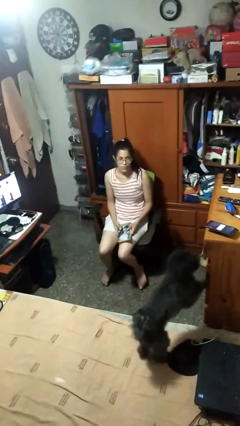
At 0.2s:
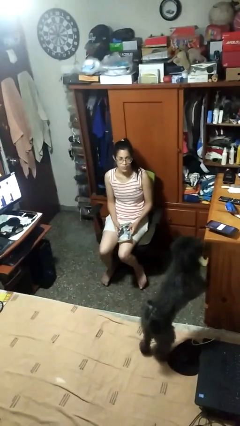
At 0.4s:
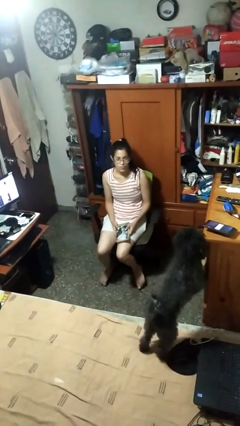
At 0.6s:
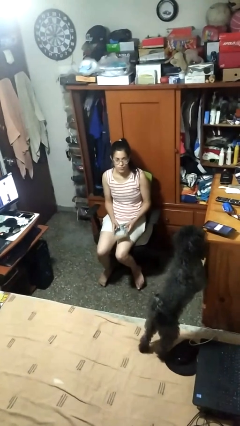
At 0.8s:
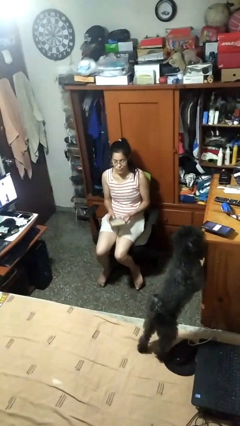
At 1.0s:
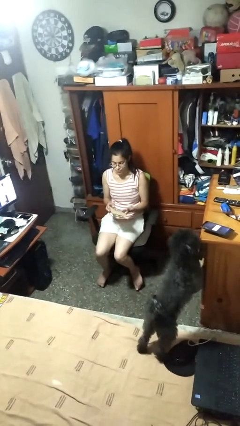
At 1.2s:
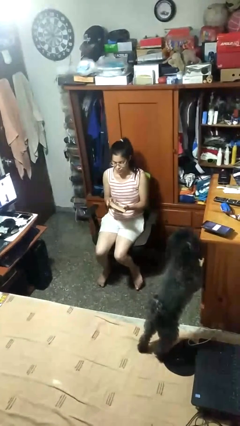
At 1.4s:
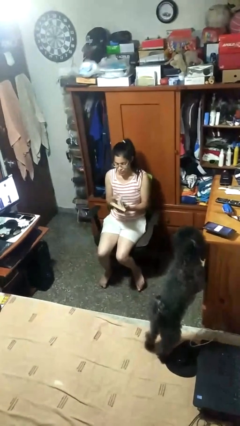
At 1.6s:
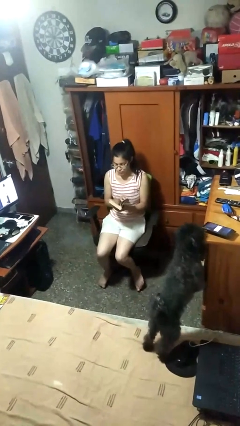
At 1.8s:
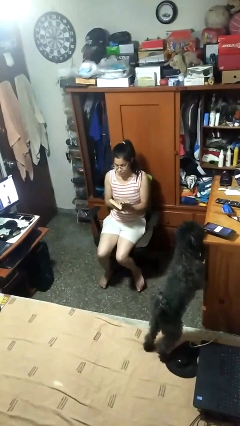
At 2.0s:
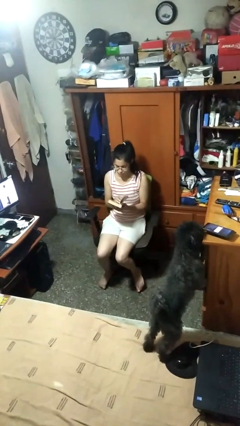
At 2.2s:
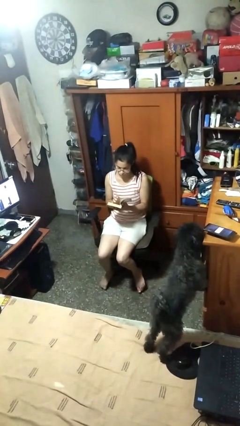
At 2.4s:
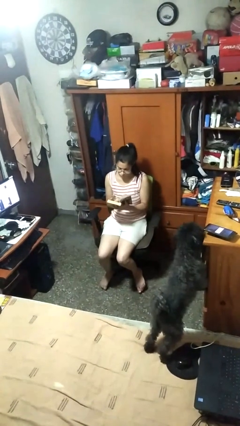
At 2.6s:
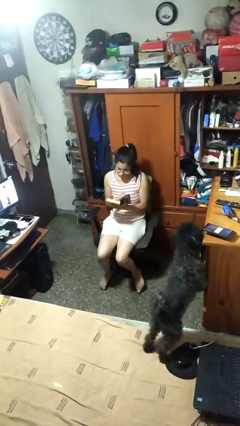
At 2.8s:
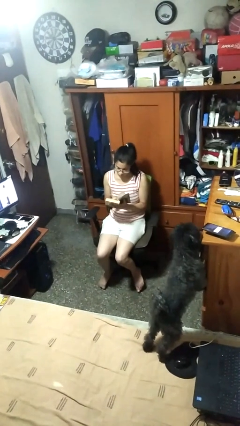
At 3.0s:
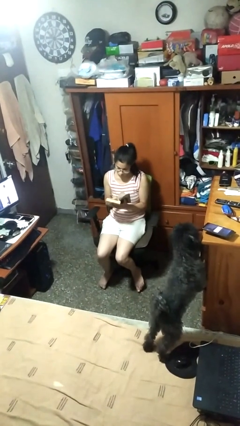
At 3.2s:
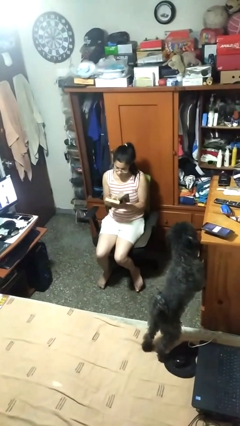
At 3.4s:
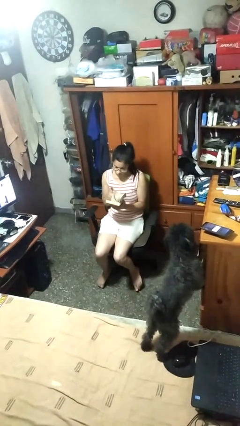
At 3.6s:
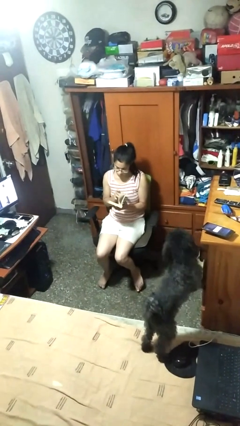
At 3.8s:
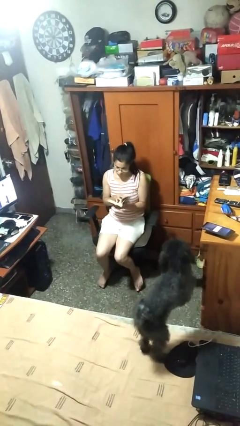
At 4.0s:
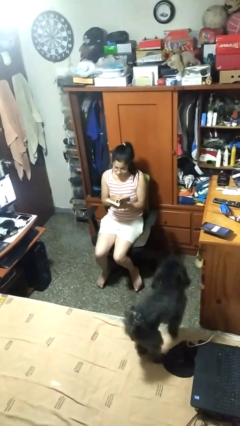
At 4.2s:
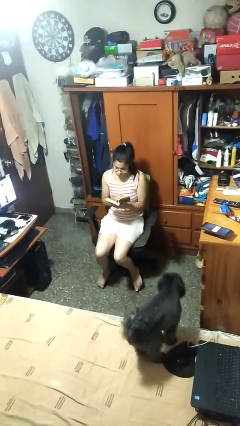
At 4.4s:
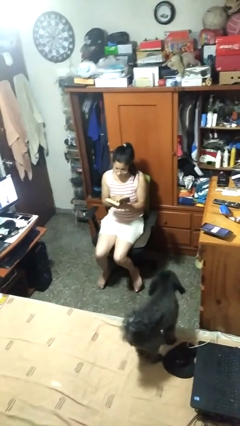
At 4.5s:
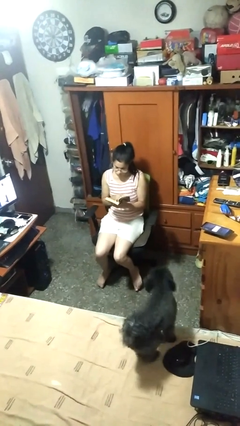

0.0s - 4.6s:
person reads book

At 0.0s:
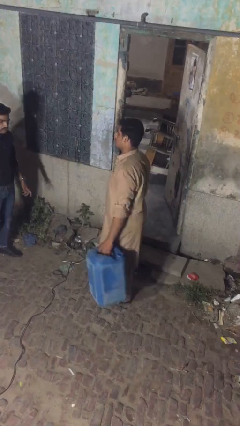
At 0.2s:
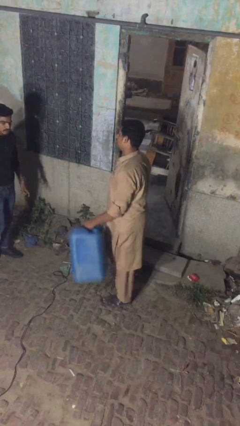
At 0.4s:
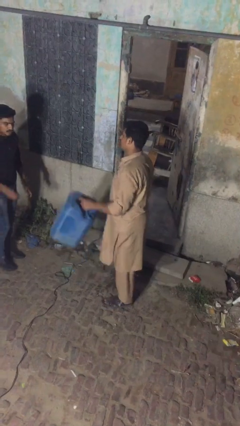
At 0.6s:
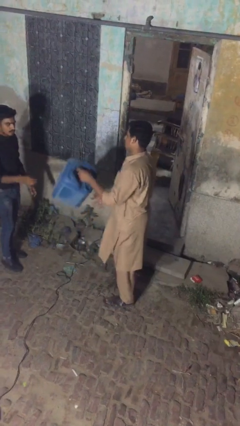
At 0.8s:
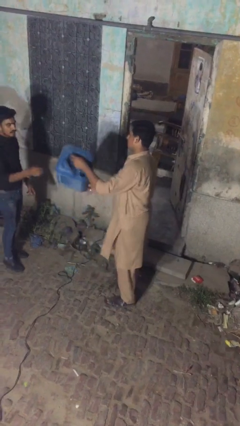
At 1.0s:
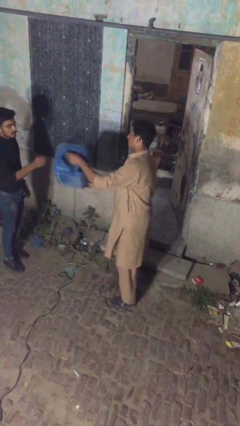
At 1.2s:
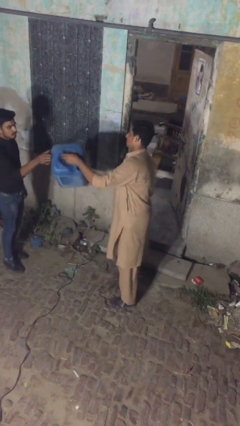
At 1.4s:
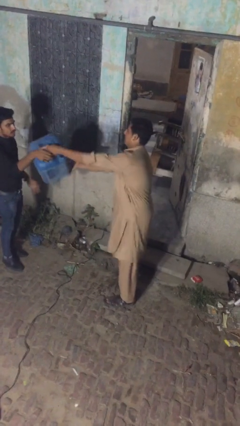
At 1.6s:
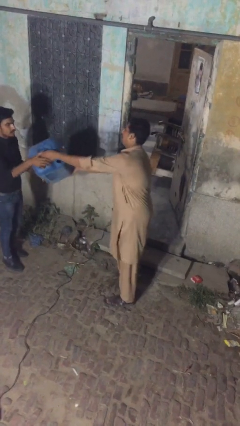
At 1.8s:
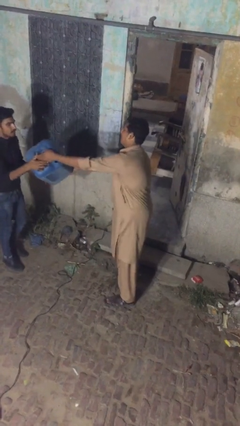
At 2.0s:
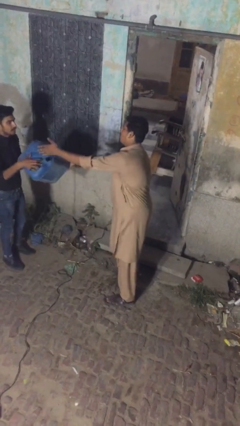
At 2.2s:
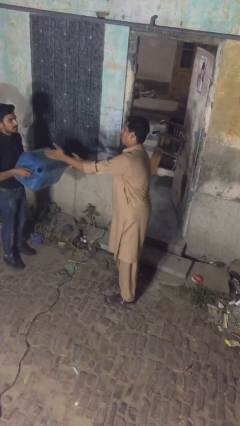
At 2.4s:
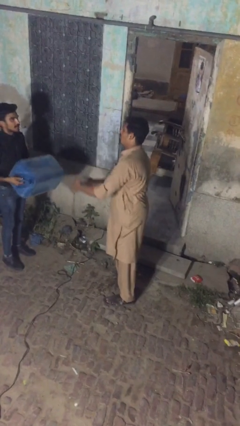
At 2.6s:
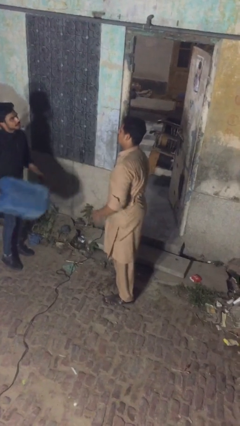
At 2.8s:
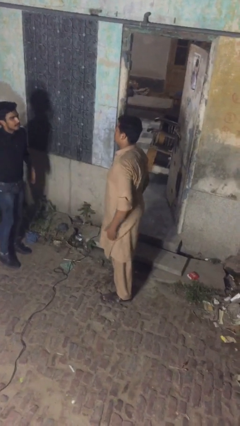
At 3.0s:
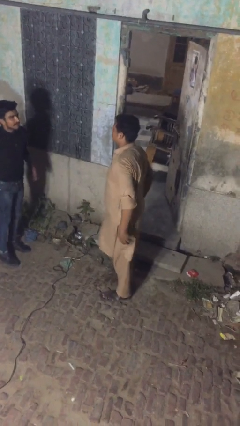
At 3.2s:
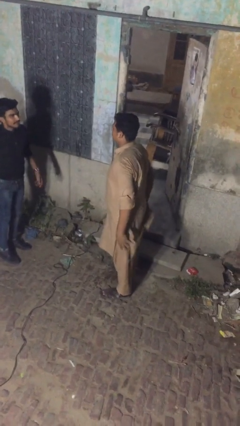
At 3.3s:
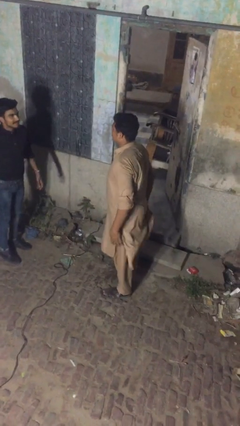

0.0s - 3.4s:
person transfers object to person

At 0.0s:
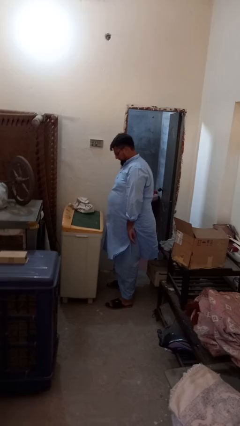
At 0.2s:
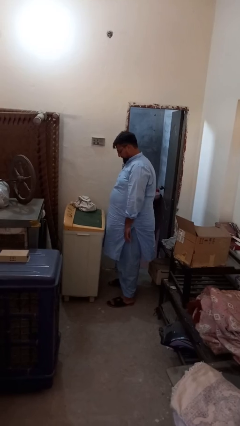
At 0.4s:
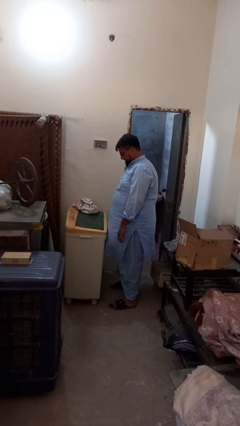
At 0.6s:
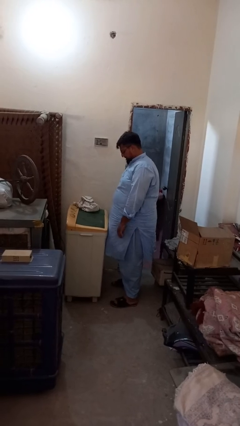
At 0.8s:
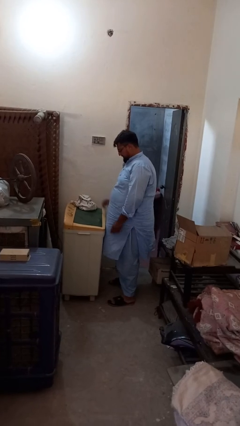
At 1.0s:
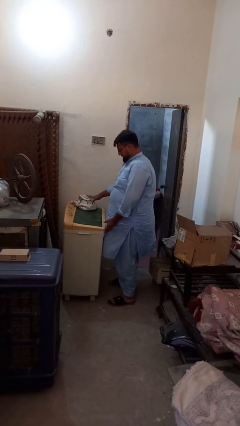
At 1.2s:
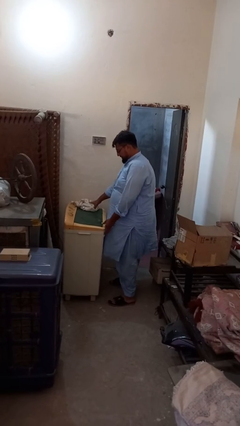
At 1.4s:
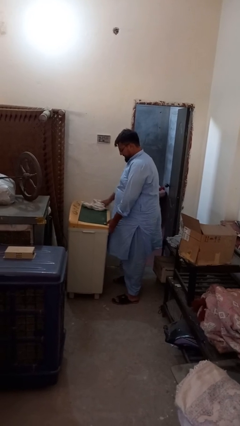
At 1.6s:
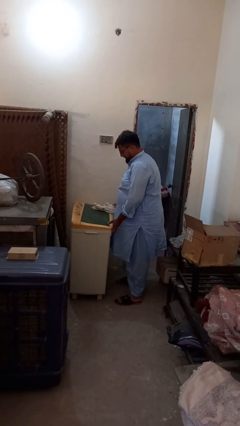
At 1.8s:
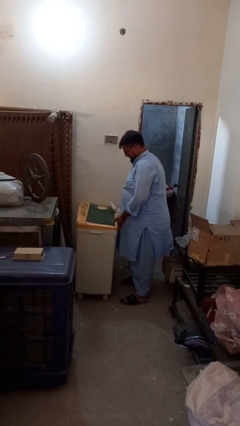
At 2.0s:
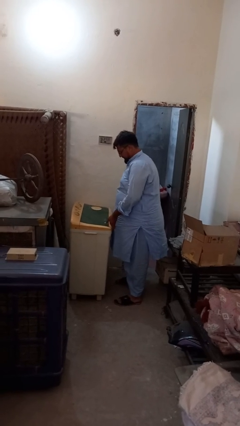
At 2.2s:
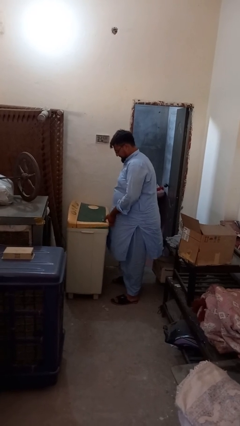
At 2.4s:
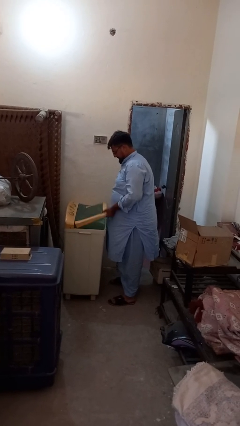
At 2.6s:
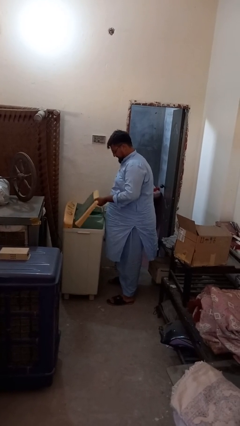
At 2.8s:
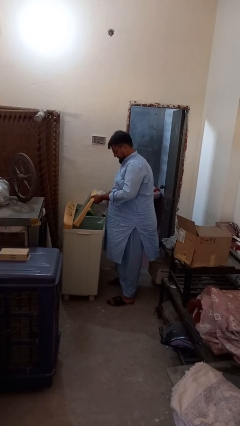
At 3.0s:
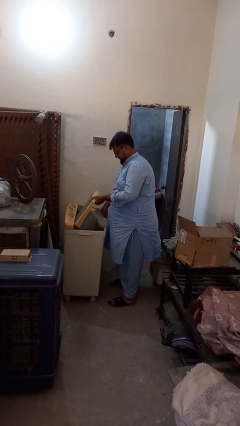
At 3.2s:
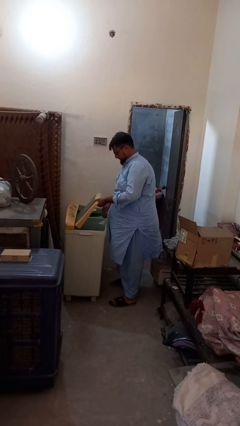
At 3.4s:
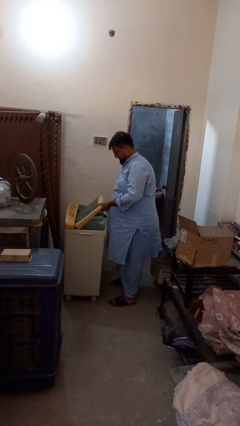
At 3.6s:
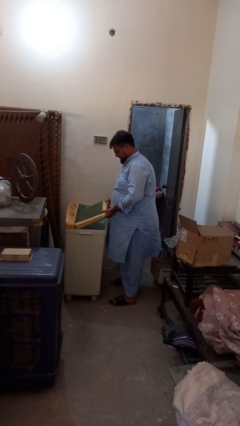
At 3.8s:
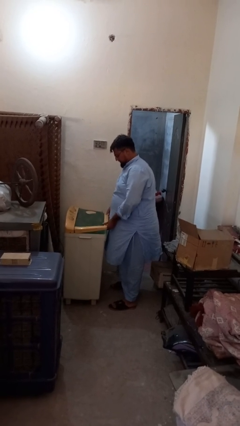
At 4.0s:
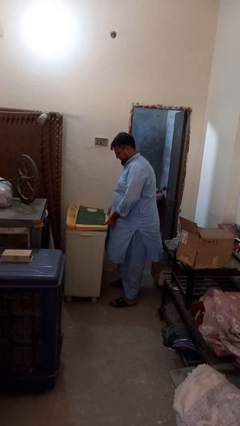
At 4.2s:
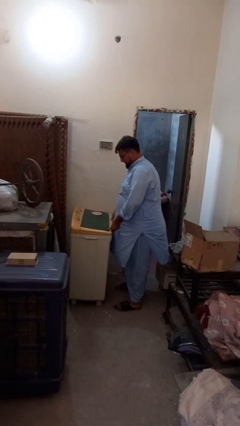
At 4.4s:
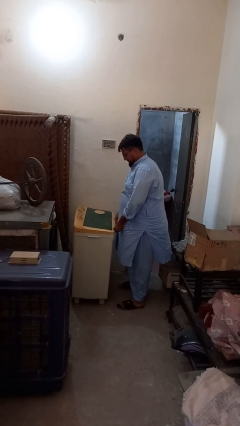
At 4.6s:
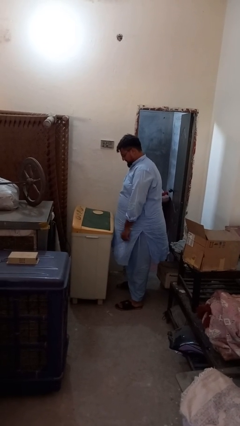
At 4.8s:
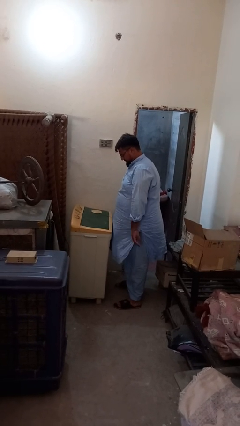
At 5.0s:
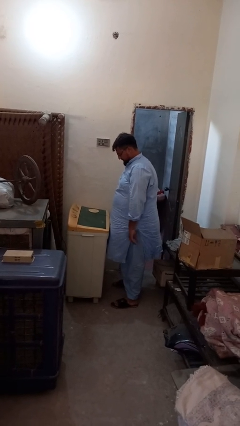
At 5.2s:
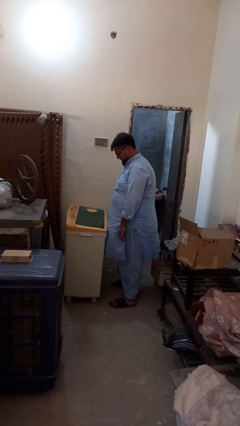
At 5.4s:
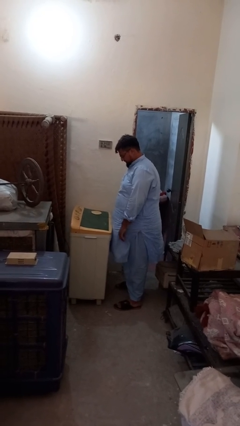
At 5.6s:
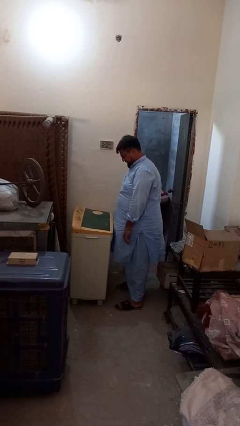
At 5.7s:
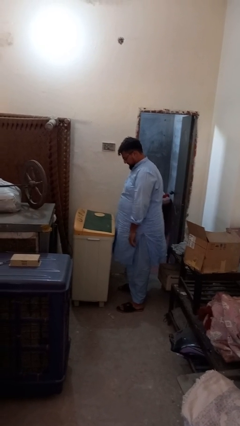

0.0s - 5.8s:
person loads clotheswasher

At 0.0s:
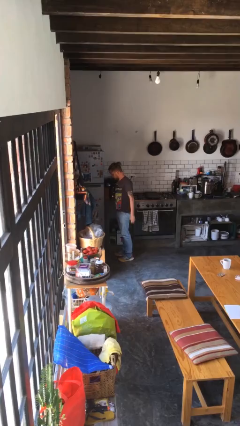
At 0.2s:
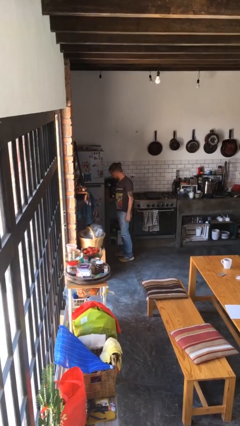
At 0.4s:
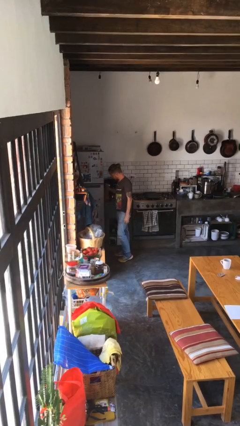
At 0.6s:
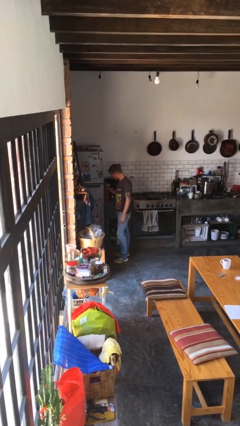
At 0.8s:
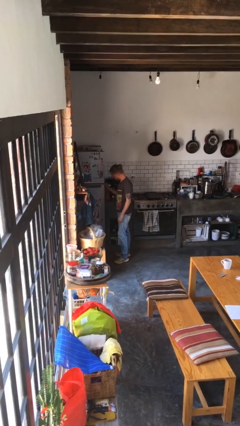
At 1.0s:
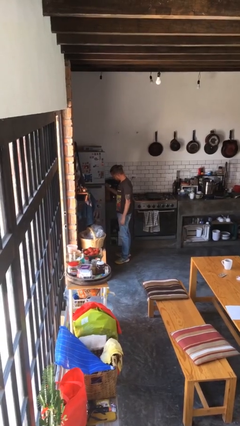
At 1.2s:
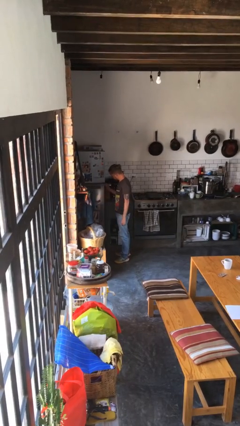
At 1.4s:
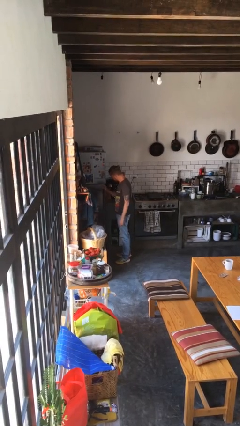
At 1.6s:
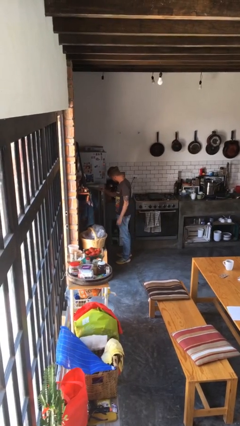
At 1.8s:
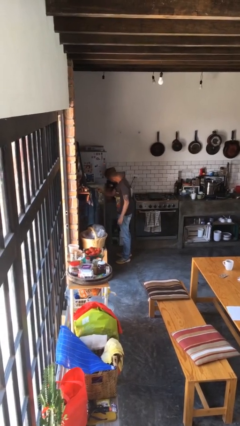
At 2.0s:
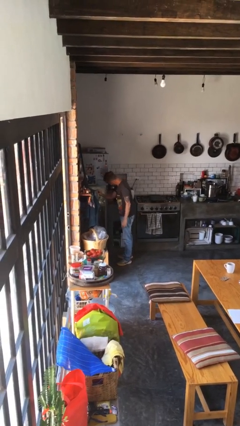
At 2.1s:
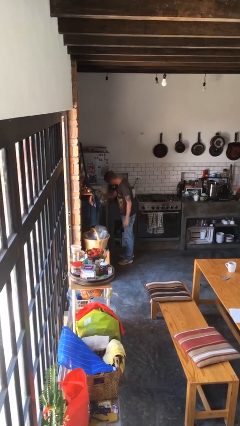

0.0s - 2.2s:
person opens refrigerator

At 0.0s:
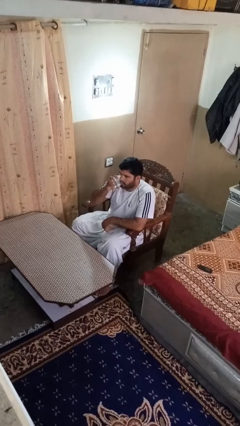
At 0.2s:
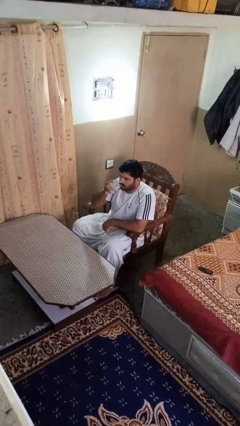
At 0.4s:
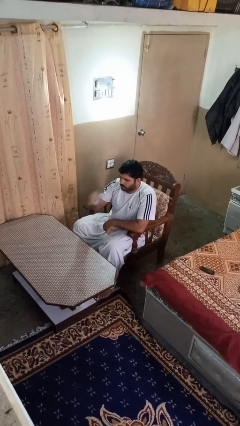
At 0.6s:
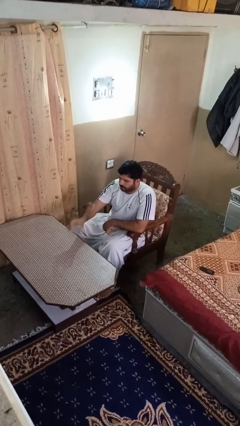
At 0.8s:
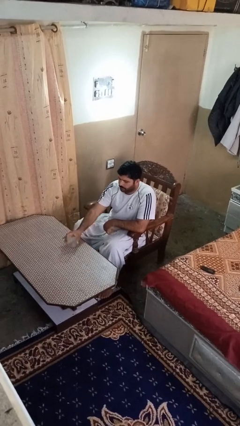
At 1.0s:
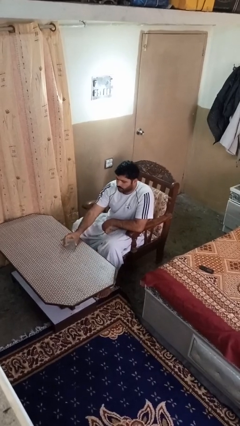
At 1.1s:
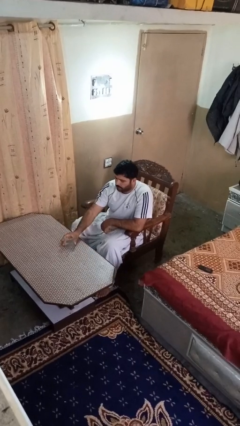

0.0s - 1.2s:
person puts down object on table

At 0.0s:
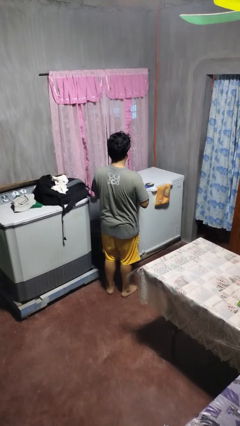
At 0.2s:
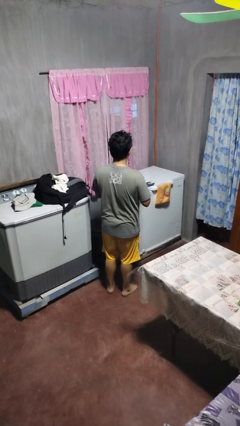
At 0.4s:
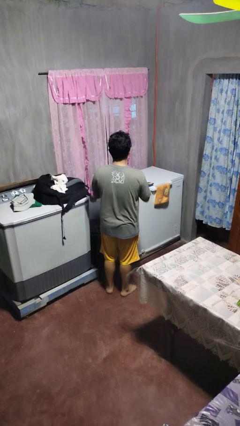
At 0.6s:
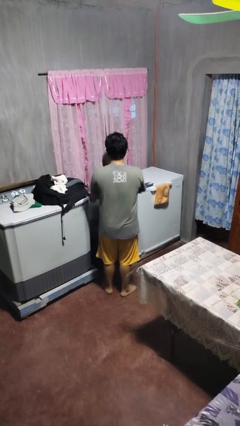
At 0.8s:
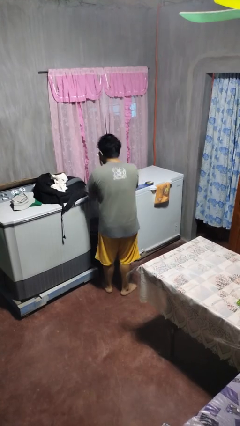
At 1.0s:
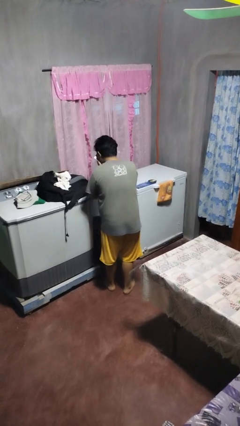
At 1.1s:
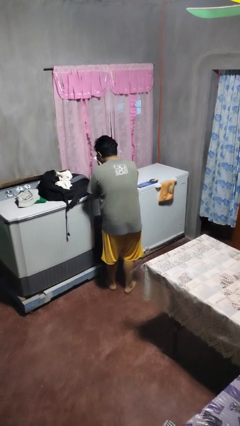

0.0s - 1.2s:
person blows nose
